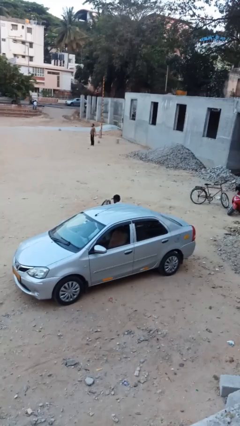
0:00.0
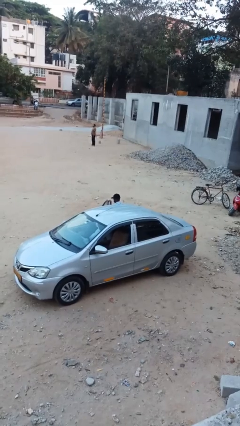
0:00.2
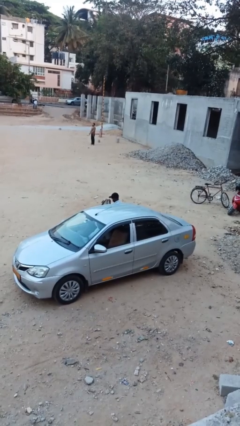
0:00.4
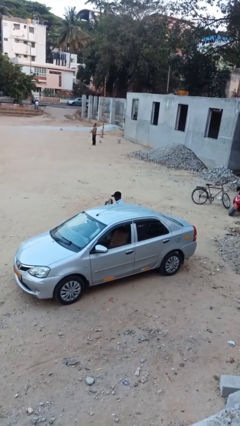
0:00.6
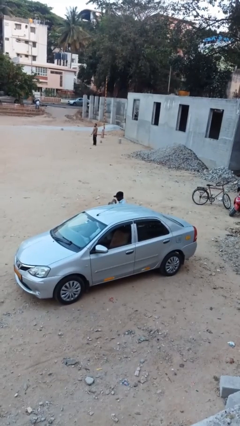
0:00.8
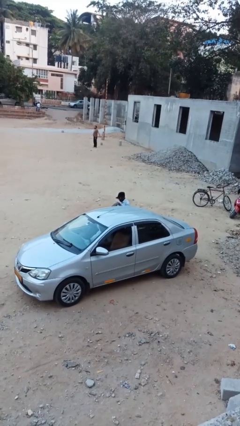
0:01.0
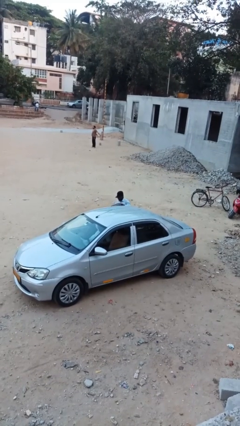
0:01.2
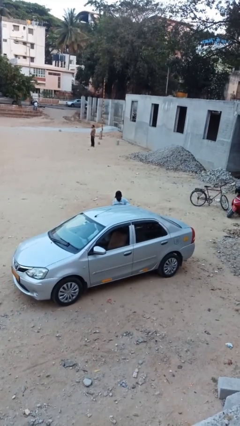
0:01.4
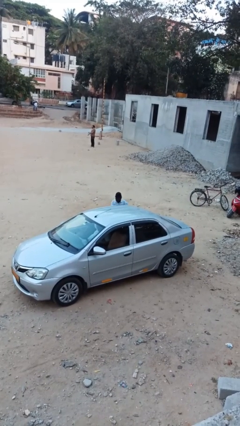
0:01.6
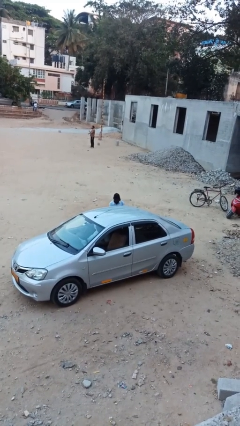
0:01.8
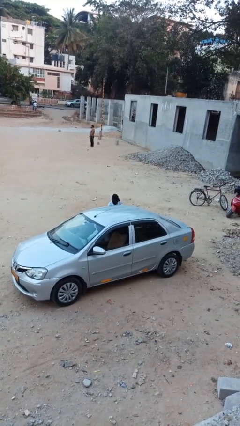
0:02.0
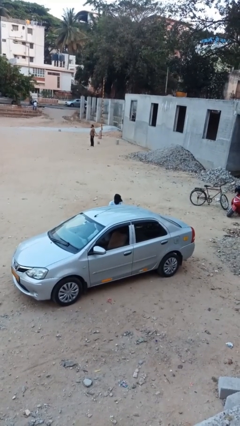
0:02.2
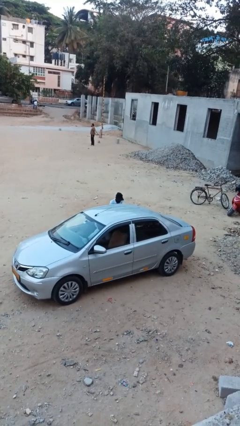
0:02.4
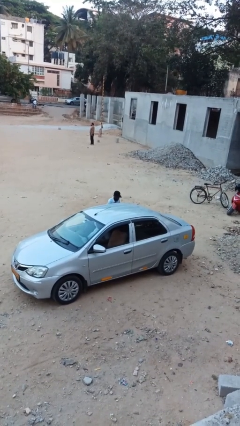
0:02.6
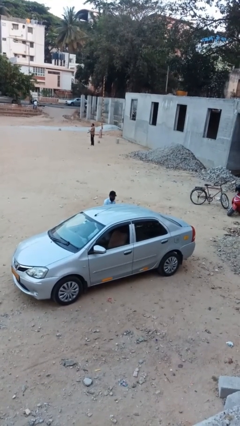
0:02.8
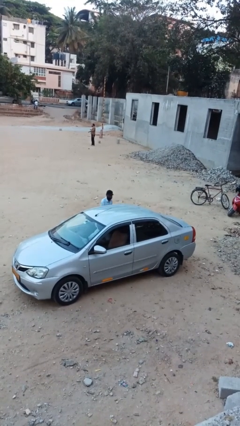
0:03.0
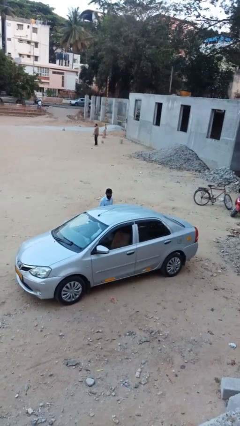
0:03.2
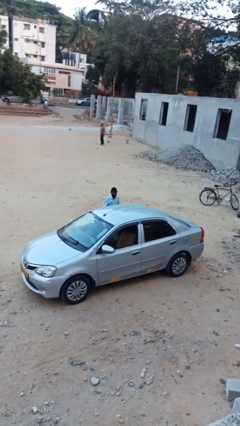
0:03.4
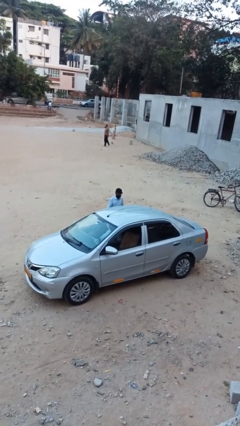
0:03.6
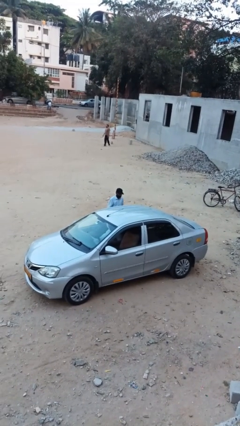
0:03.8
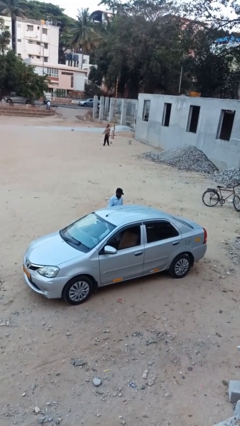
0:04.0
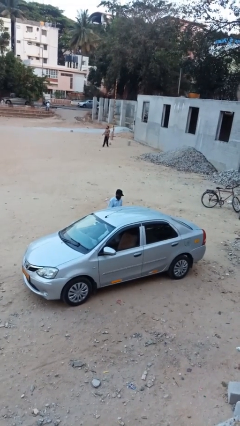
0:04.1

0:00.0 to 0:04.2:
person exits car

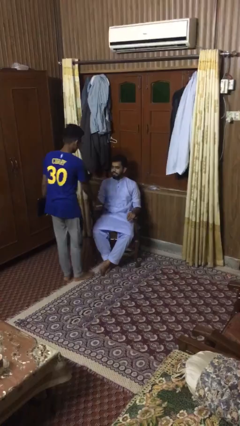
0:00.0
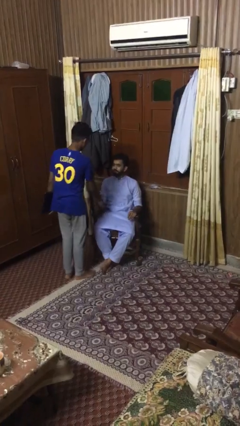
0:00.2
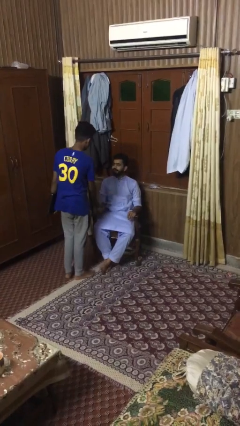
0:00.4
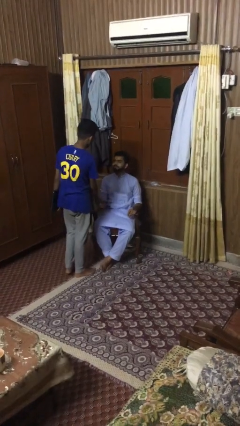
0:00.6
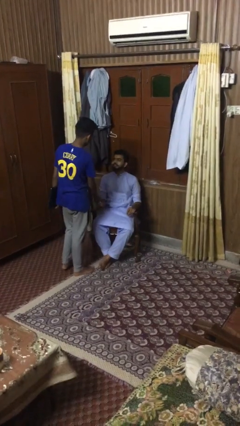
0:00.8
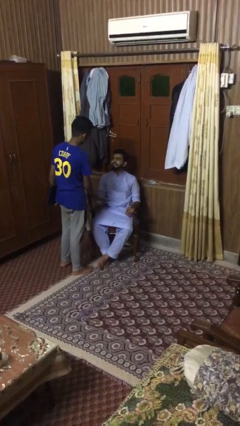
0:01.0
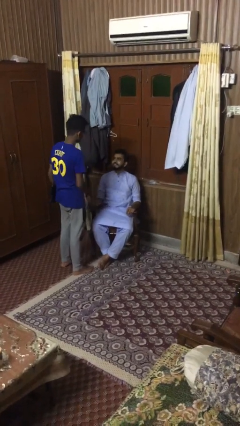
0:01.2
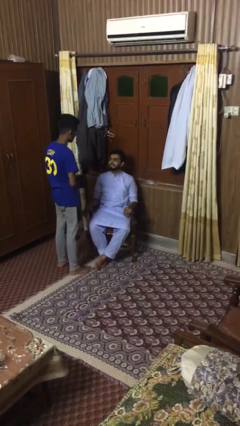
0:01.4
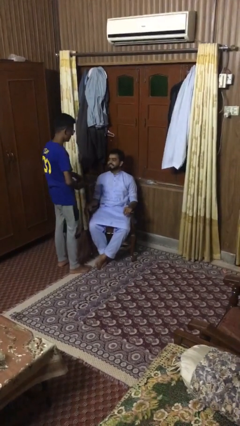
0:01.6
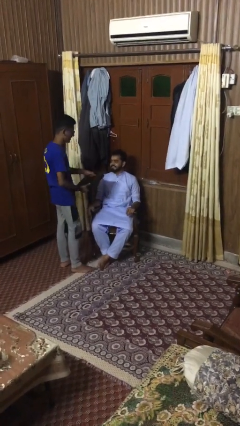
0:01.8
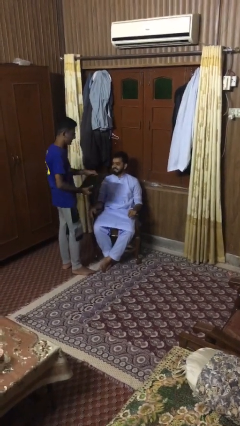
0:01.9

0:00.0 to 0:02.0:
person shakes hand

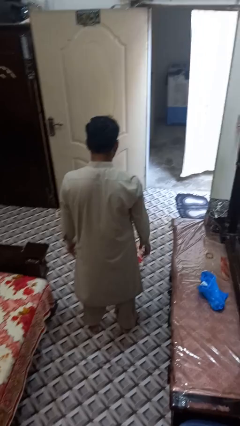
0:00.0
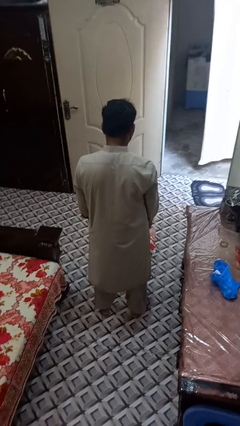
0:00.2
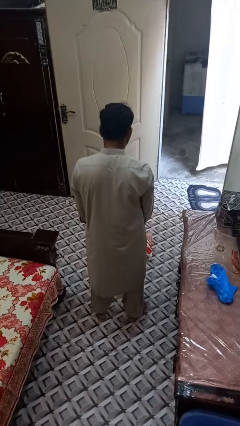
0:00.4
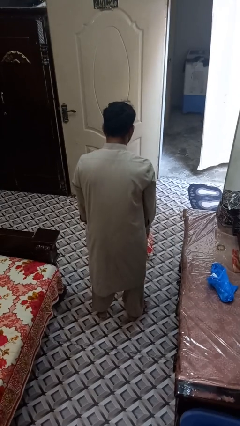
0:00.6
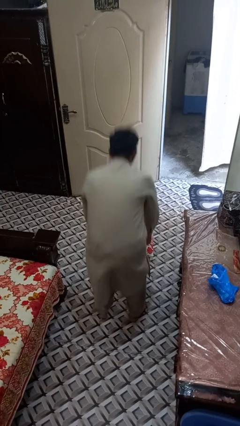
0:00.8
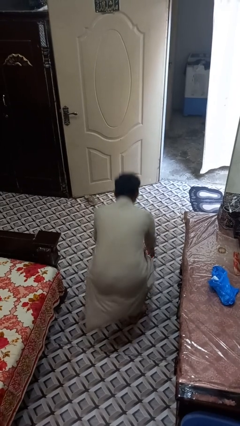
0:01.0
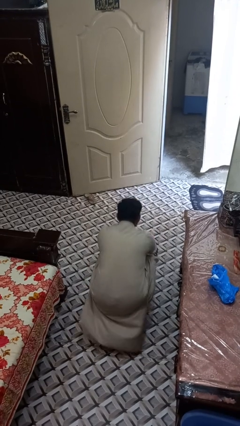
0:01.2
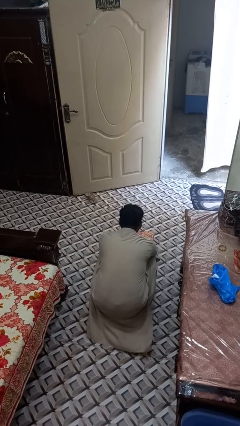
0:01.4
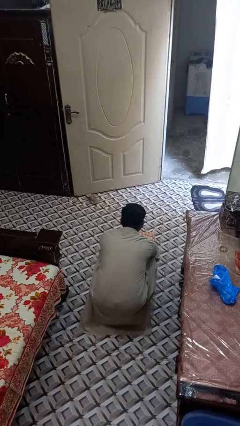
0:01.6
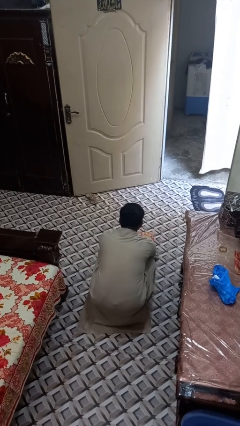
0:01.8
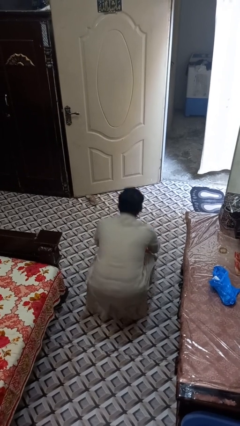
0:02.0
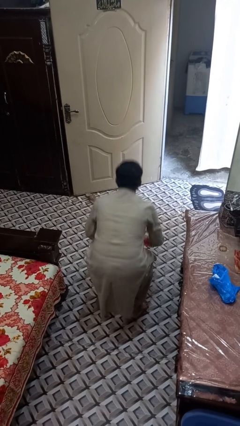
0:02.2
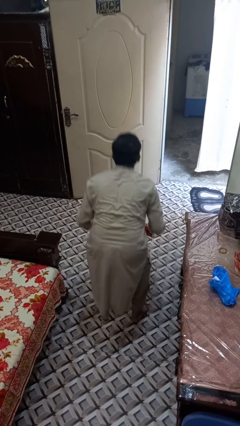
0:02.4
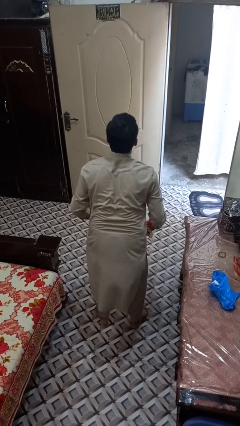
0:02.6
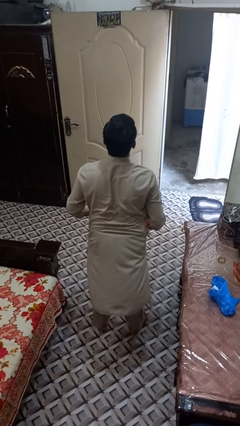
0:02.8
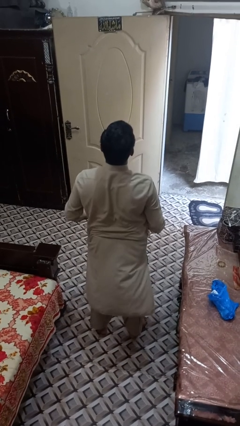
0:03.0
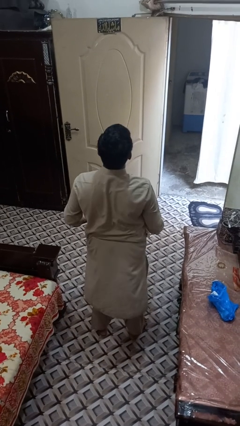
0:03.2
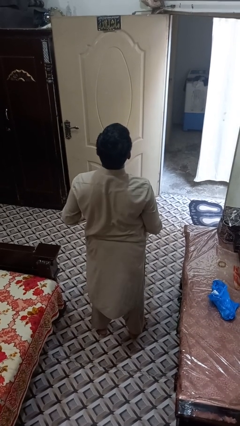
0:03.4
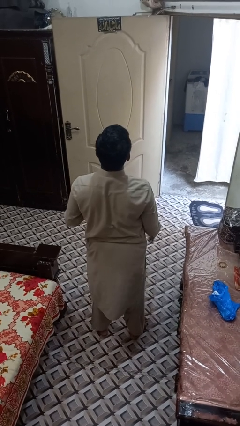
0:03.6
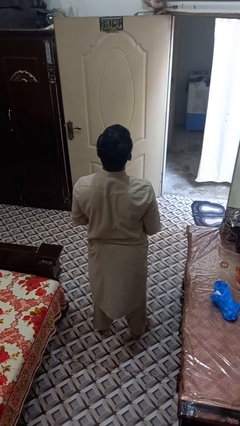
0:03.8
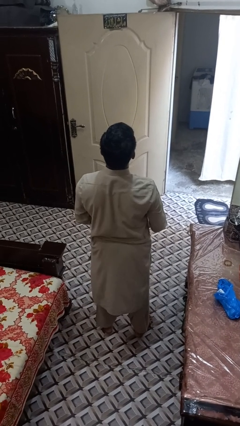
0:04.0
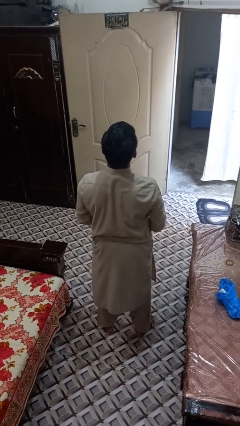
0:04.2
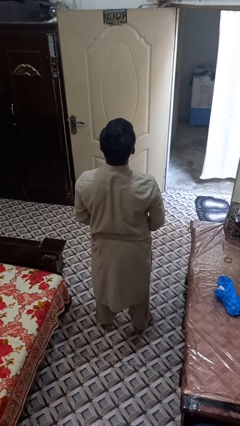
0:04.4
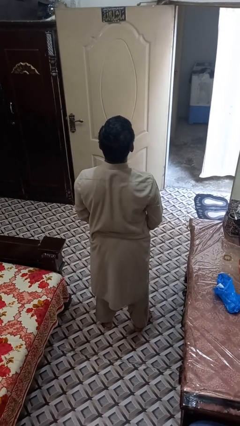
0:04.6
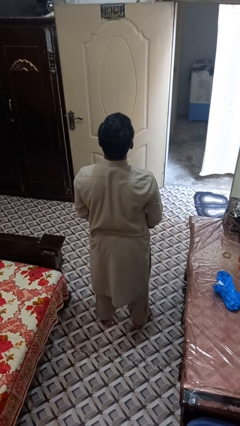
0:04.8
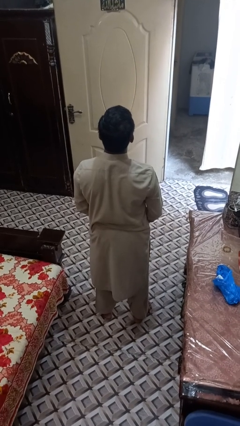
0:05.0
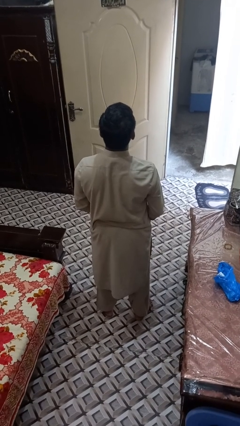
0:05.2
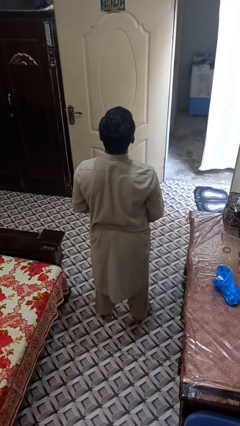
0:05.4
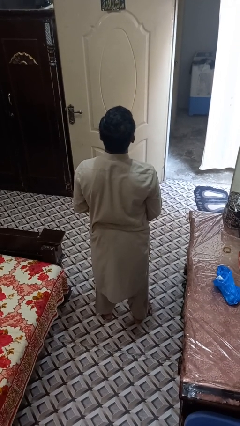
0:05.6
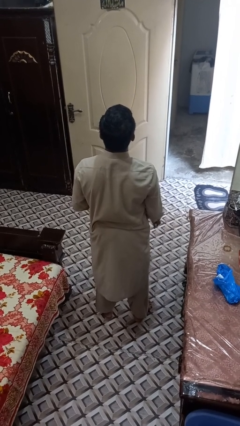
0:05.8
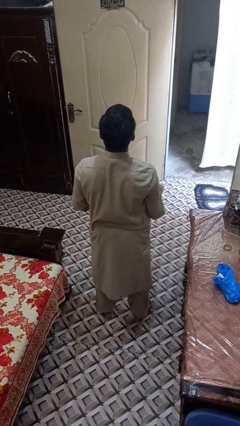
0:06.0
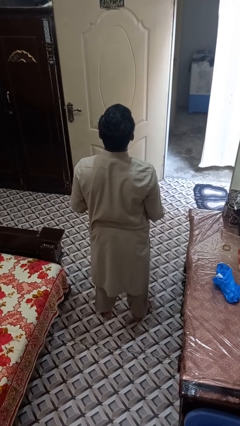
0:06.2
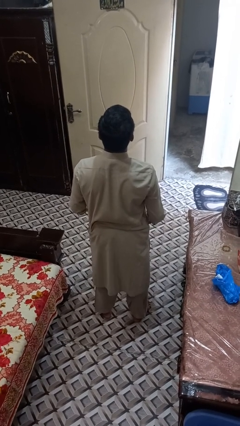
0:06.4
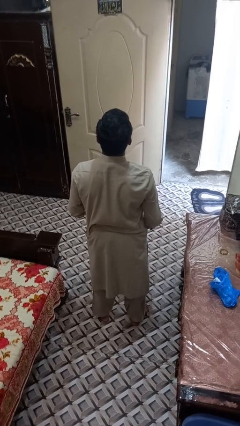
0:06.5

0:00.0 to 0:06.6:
person picks up object from floor

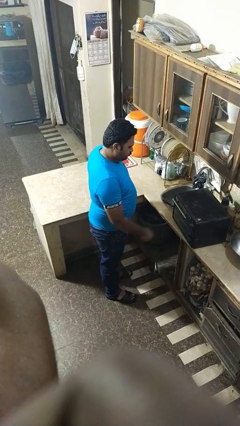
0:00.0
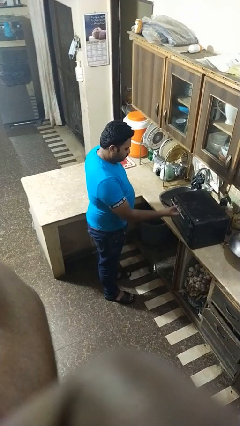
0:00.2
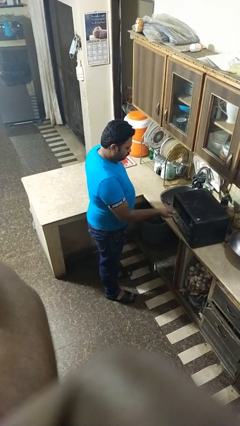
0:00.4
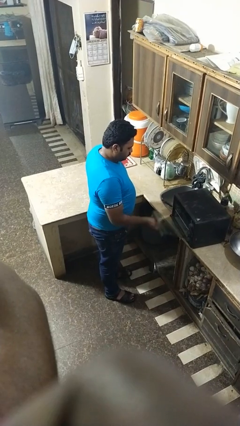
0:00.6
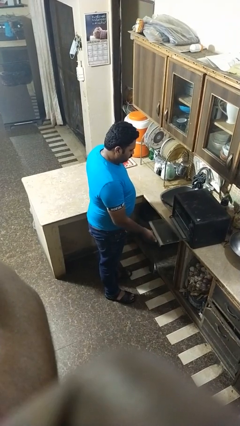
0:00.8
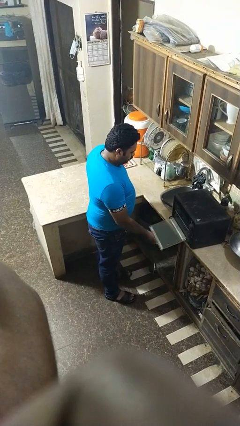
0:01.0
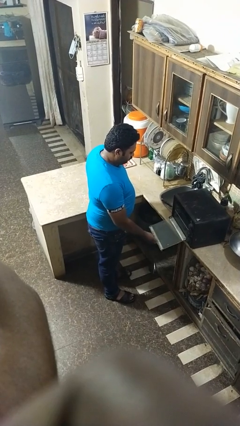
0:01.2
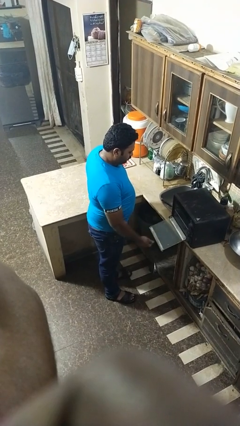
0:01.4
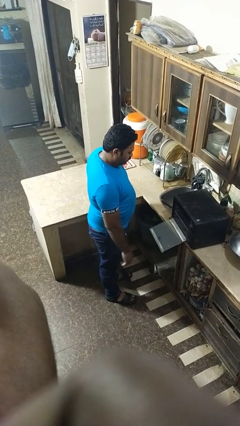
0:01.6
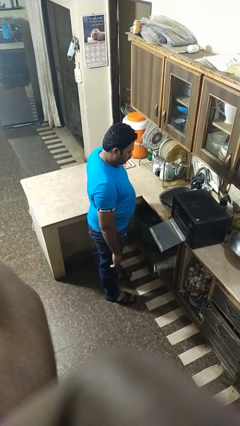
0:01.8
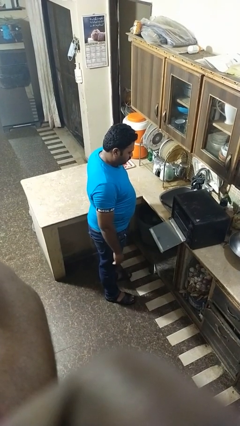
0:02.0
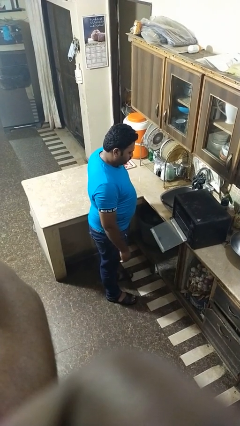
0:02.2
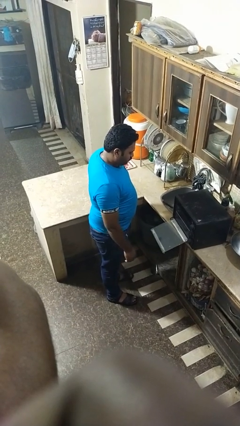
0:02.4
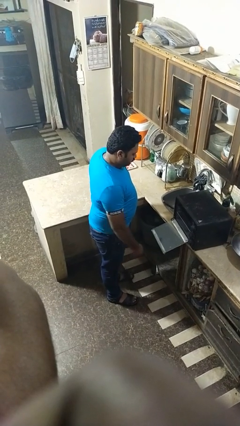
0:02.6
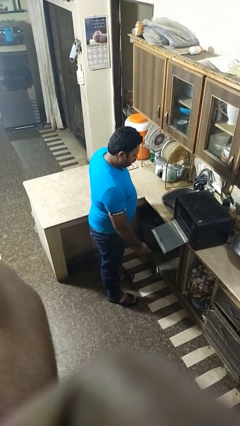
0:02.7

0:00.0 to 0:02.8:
person opens oven door

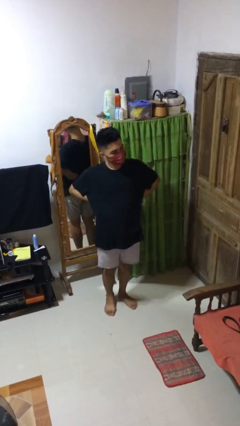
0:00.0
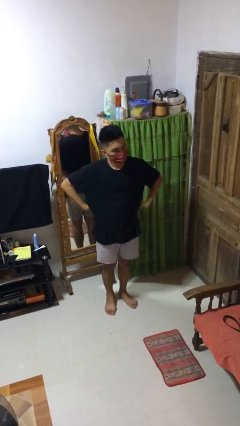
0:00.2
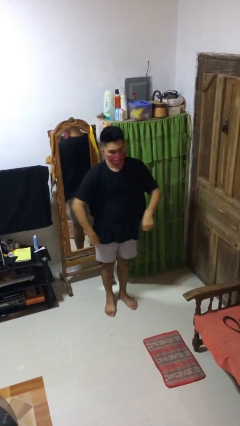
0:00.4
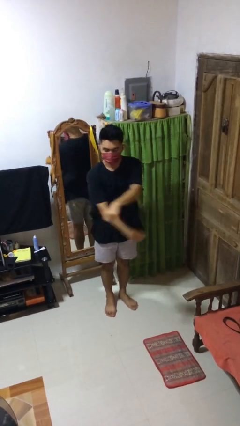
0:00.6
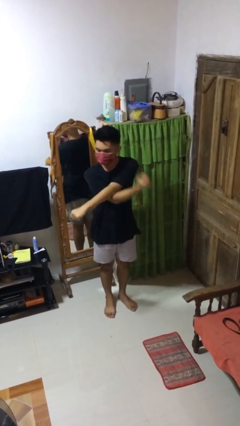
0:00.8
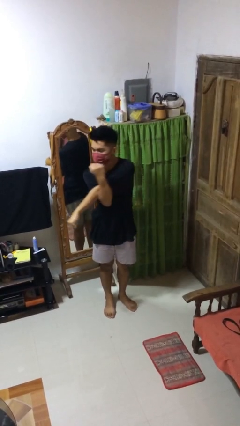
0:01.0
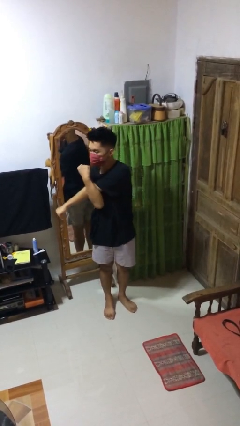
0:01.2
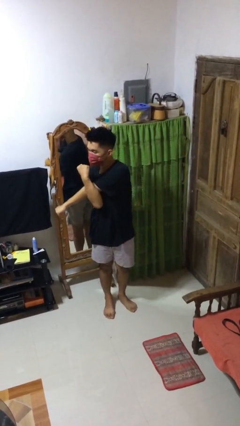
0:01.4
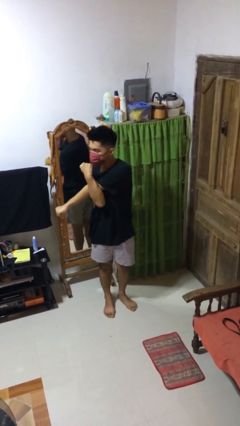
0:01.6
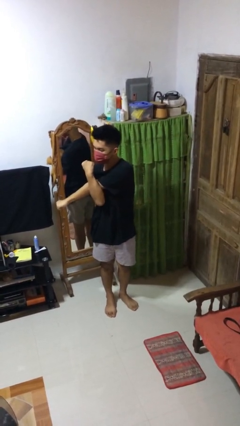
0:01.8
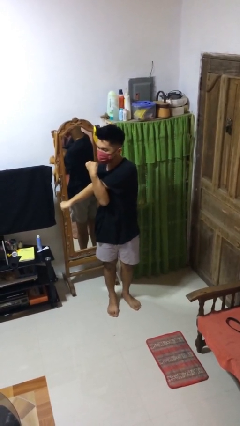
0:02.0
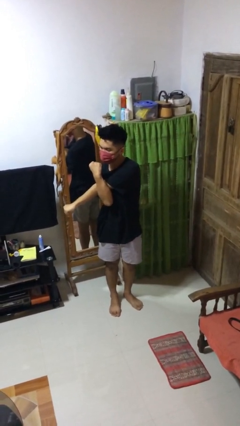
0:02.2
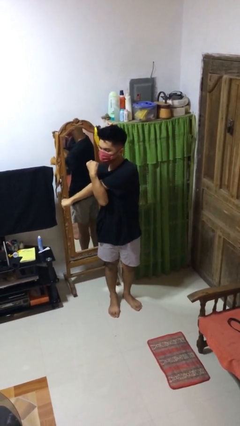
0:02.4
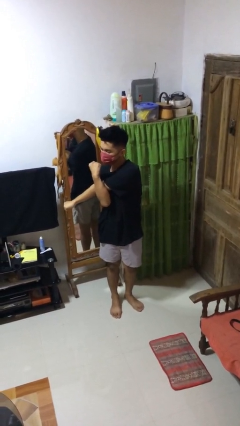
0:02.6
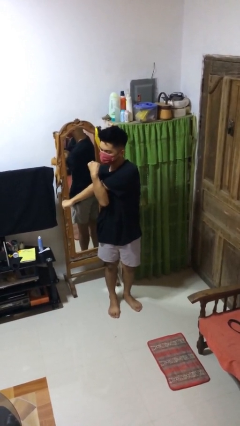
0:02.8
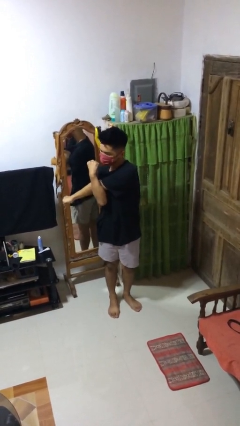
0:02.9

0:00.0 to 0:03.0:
person stretches arms to side
